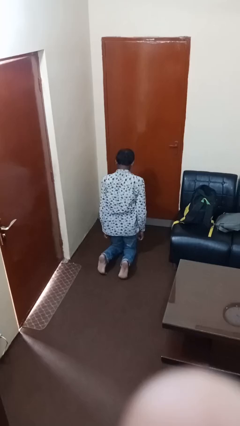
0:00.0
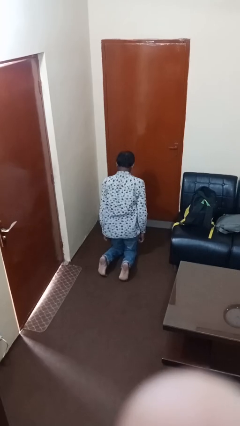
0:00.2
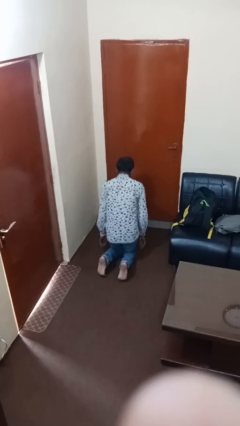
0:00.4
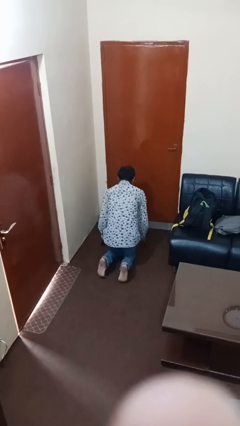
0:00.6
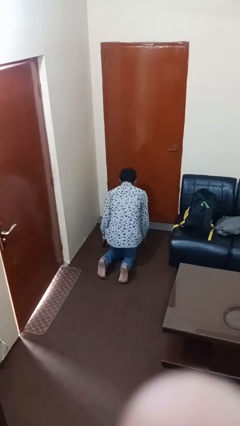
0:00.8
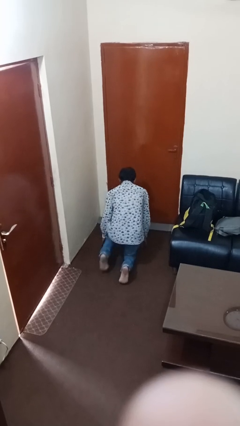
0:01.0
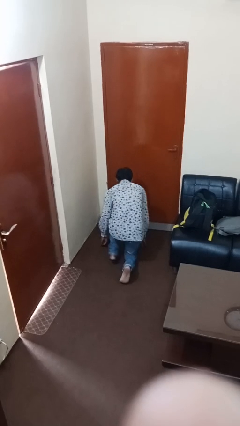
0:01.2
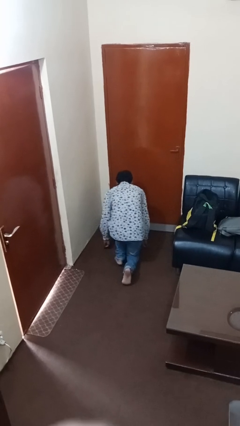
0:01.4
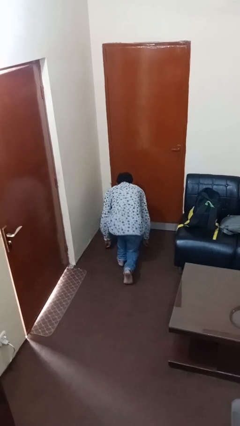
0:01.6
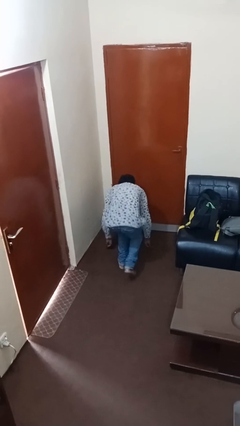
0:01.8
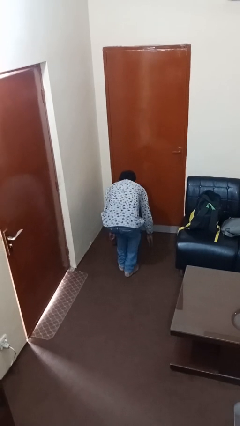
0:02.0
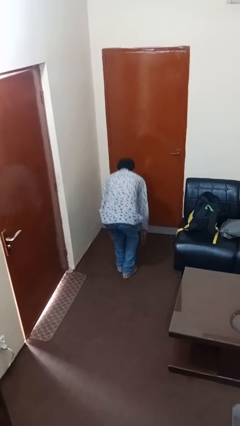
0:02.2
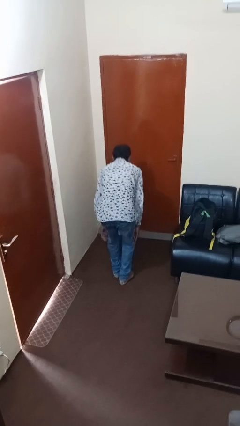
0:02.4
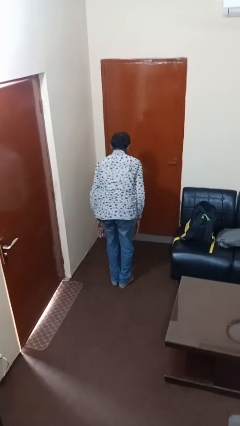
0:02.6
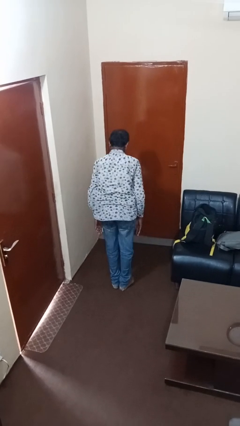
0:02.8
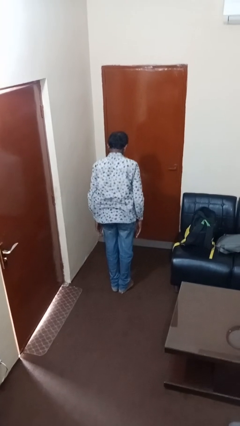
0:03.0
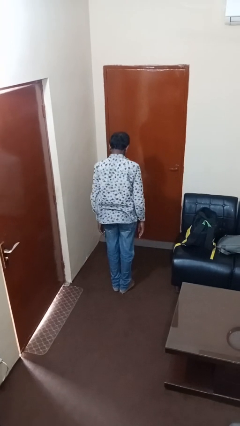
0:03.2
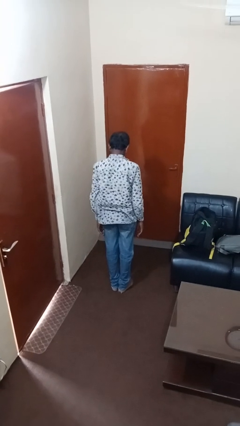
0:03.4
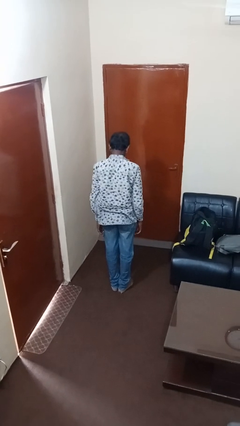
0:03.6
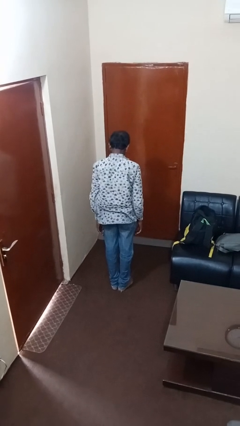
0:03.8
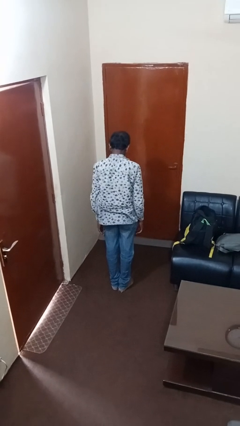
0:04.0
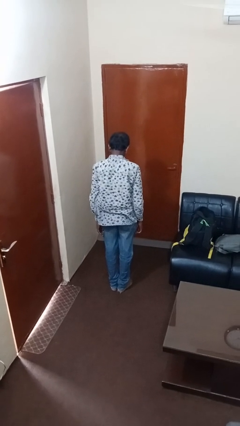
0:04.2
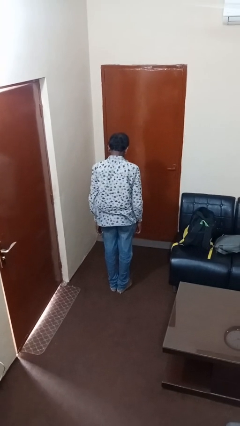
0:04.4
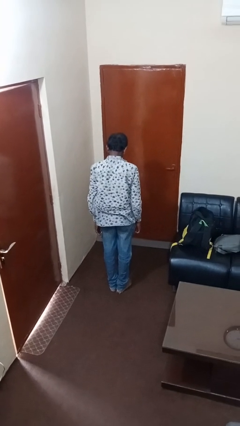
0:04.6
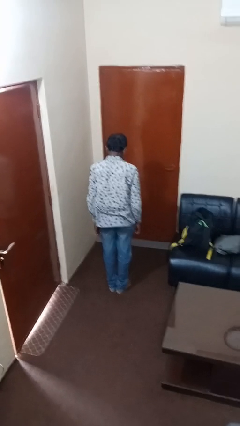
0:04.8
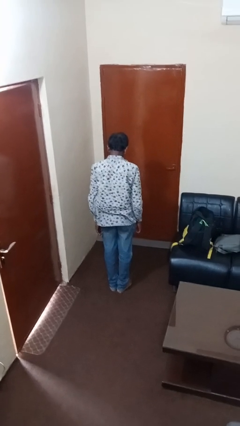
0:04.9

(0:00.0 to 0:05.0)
person stands up from floor

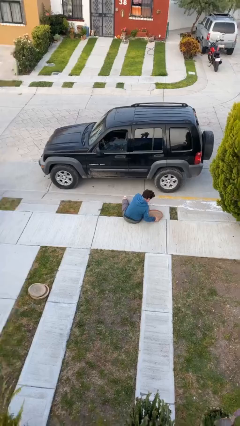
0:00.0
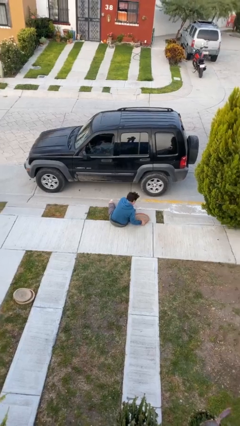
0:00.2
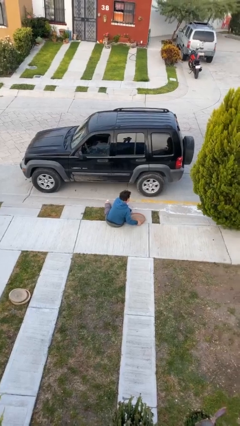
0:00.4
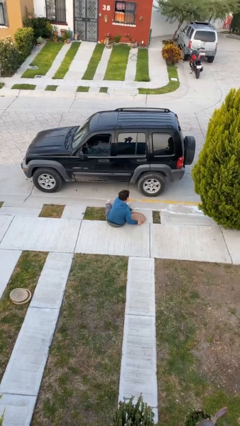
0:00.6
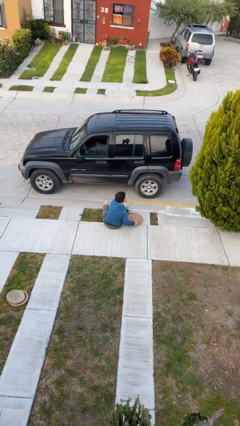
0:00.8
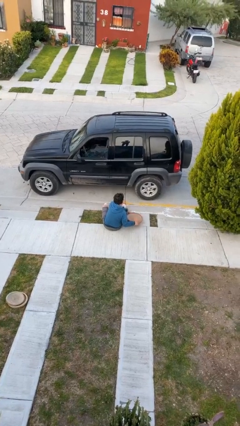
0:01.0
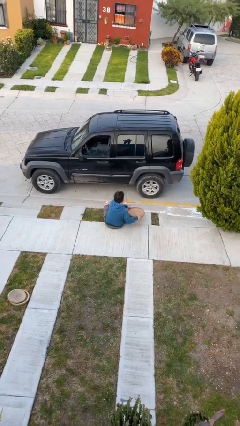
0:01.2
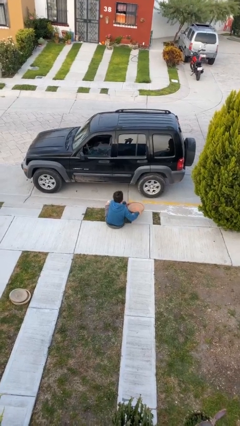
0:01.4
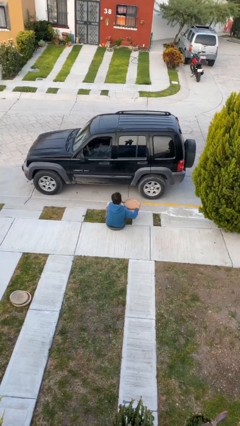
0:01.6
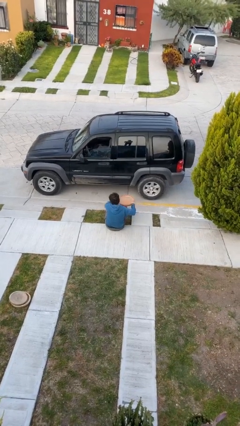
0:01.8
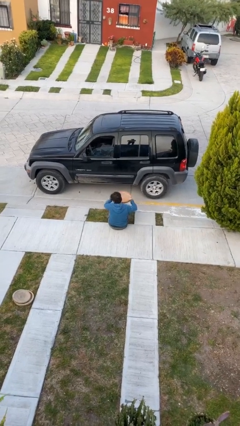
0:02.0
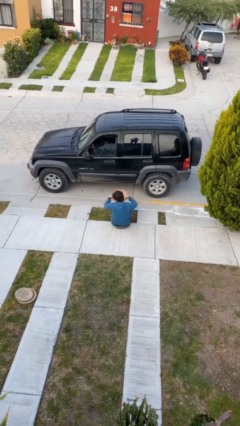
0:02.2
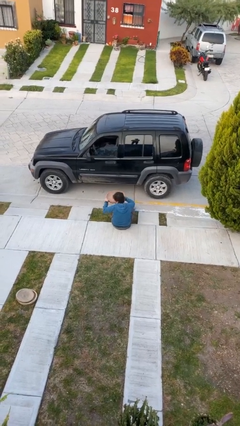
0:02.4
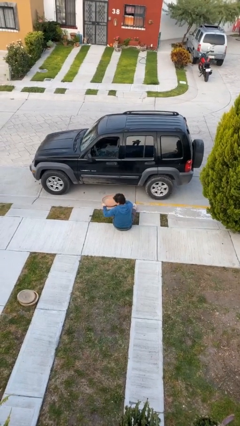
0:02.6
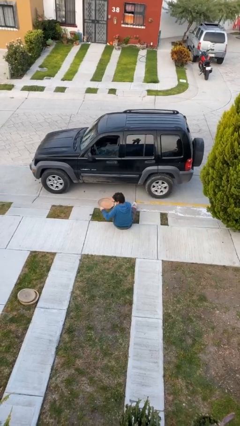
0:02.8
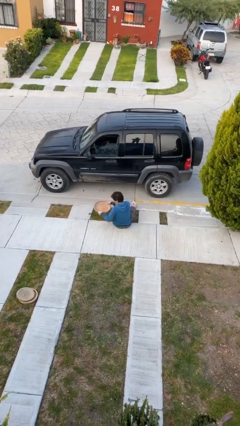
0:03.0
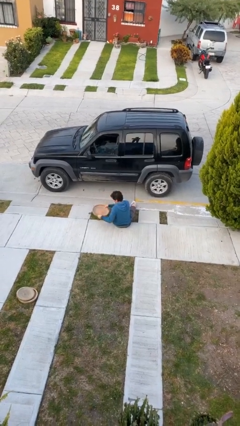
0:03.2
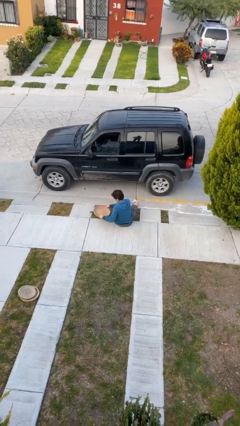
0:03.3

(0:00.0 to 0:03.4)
person picks up object from floor

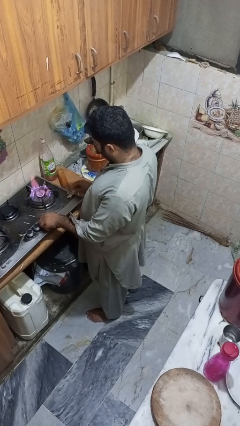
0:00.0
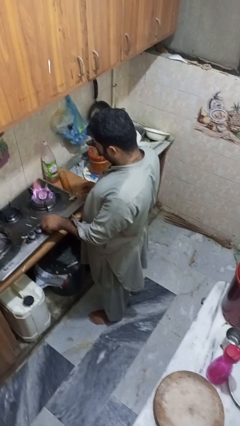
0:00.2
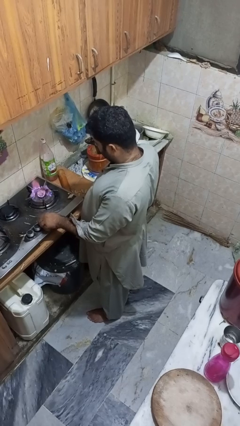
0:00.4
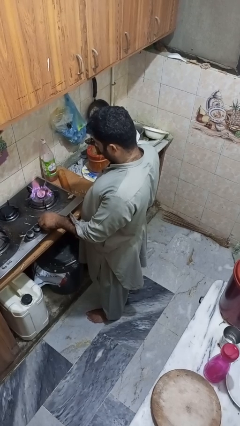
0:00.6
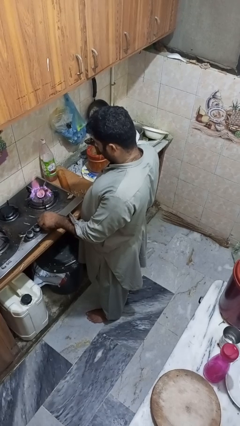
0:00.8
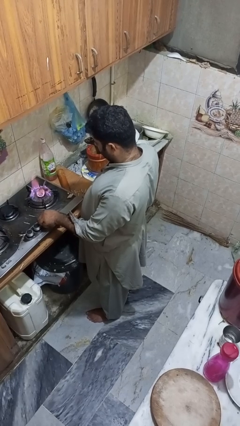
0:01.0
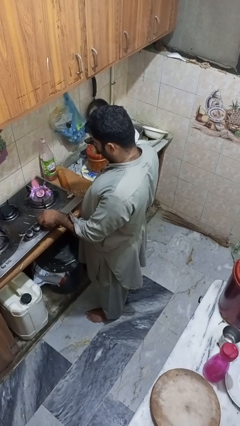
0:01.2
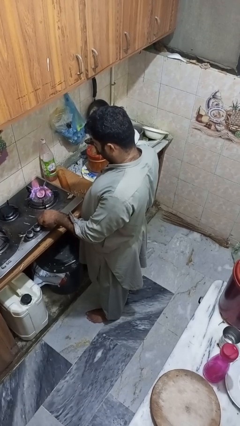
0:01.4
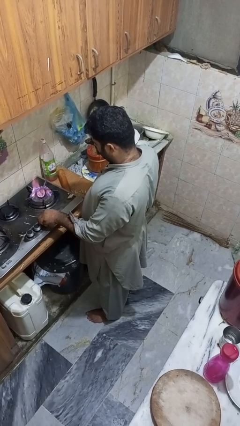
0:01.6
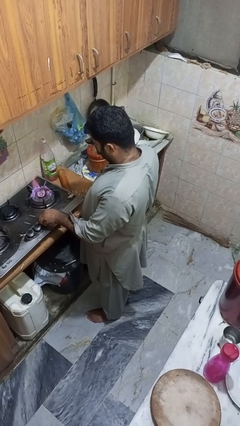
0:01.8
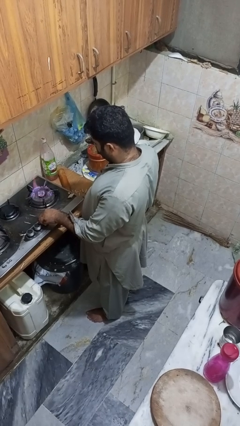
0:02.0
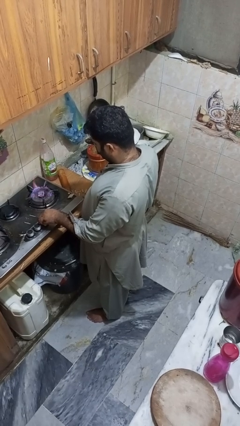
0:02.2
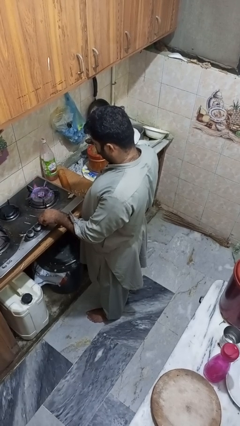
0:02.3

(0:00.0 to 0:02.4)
person turns off stovetop

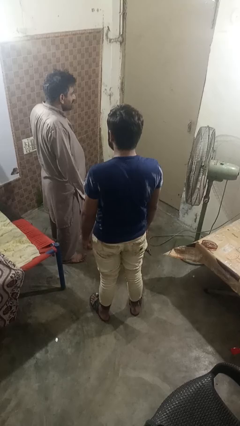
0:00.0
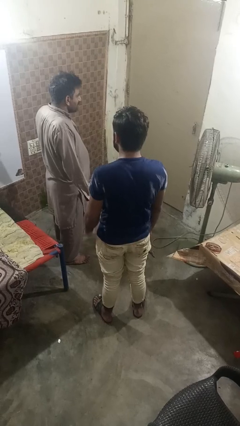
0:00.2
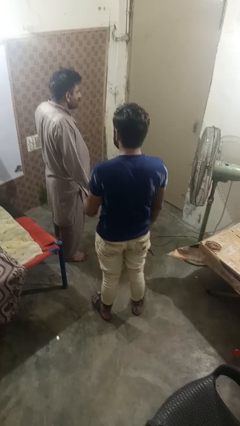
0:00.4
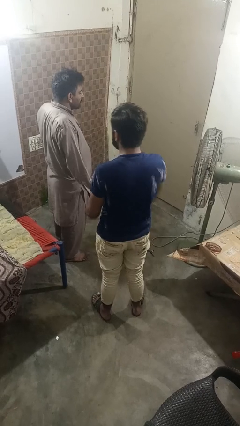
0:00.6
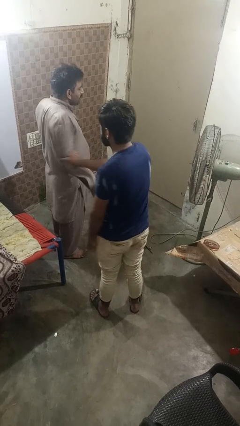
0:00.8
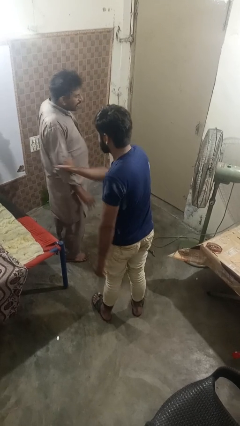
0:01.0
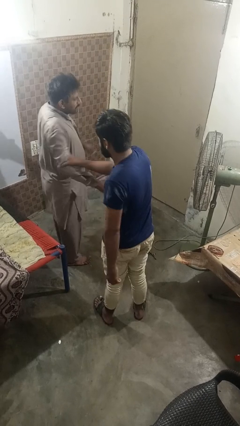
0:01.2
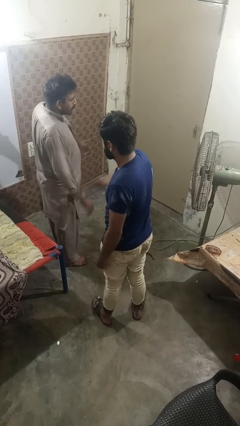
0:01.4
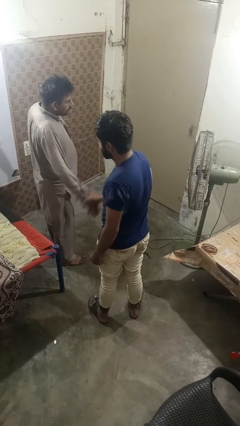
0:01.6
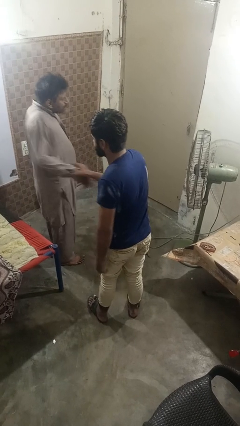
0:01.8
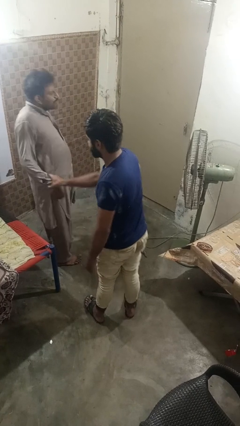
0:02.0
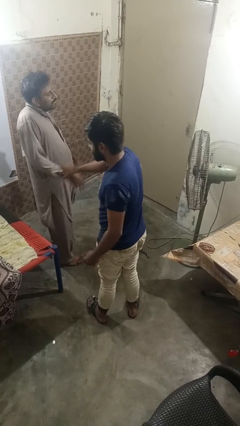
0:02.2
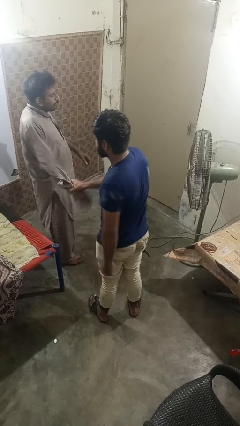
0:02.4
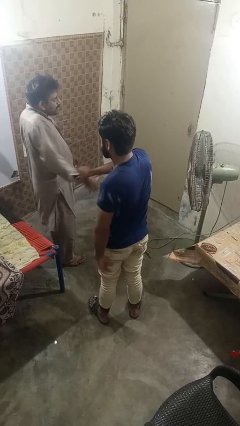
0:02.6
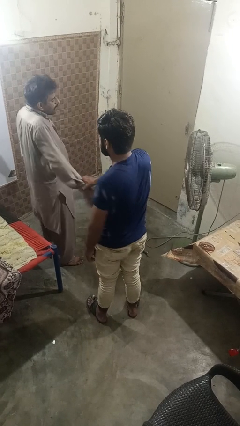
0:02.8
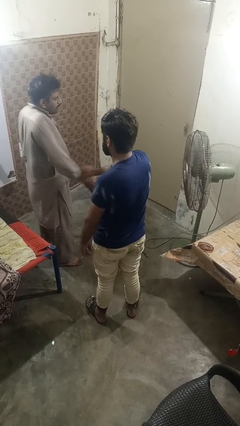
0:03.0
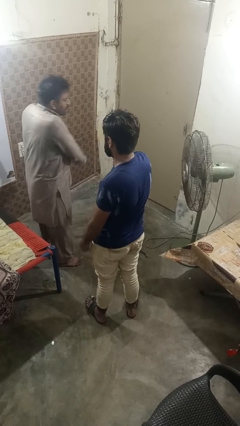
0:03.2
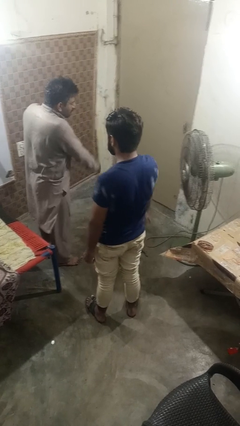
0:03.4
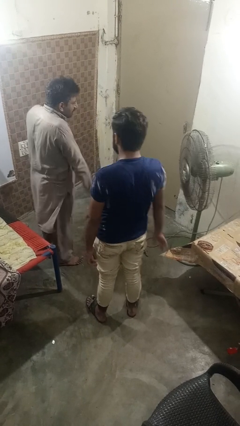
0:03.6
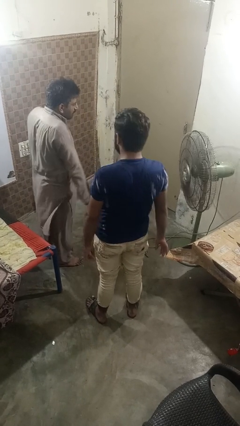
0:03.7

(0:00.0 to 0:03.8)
person grabs person by forearm

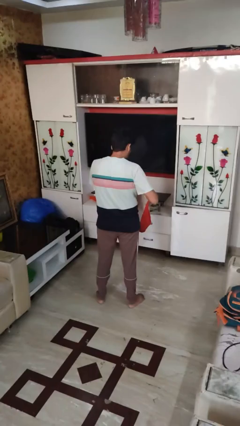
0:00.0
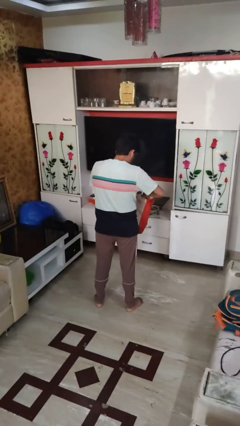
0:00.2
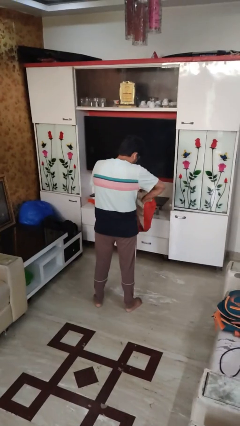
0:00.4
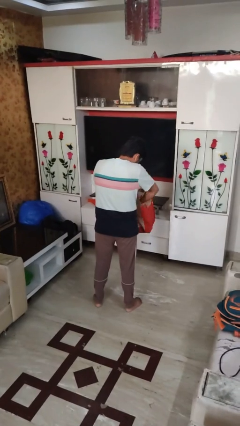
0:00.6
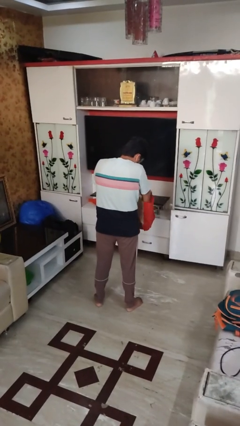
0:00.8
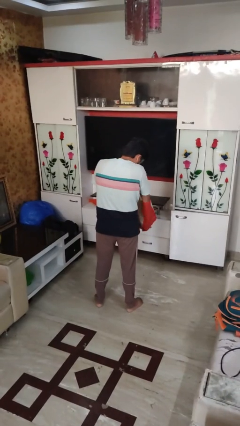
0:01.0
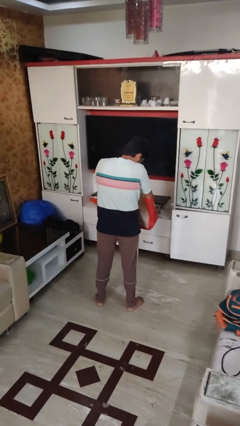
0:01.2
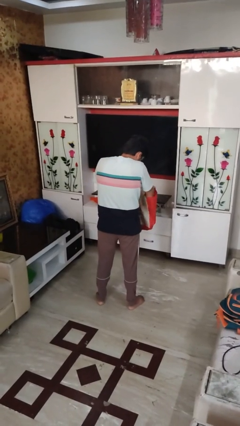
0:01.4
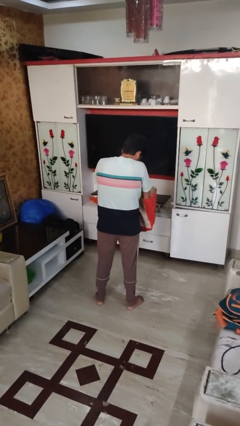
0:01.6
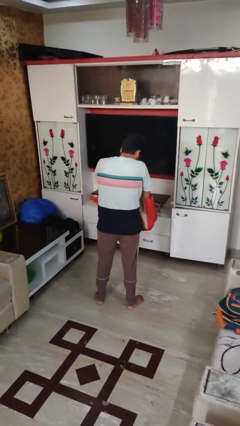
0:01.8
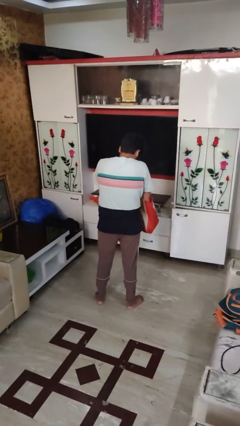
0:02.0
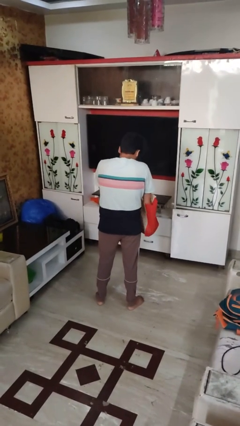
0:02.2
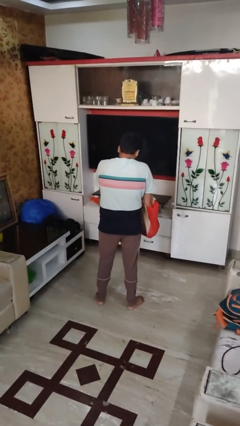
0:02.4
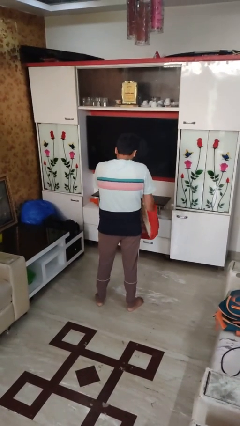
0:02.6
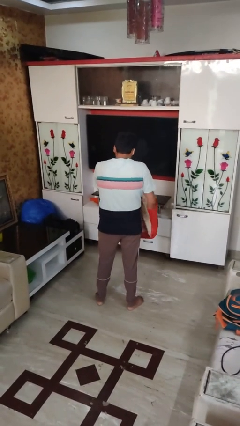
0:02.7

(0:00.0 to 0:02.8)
person searches in bag
